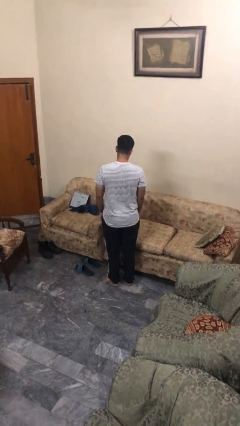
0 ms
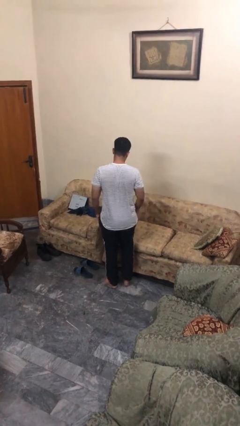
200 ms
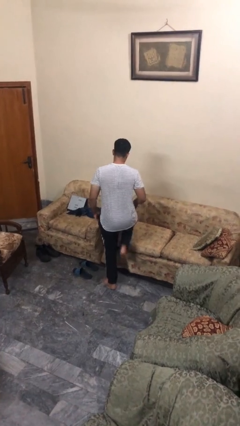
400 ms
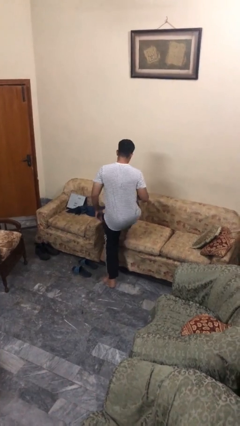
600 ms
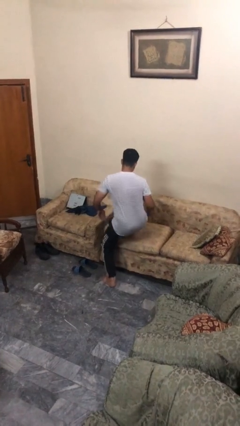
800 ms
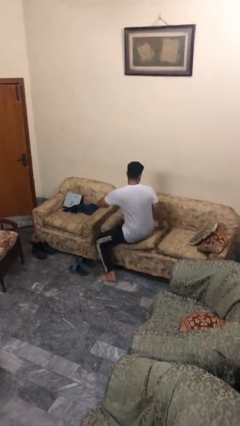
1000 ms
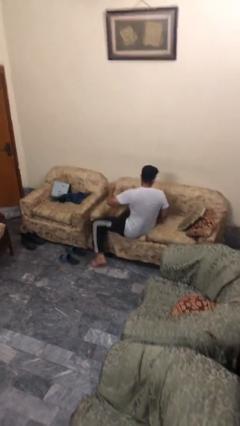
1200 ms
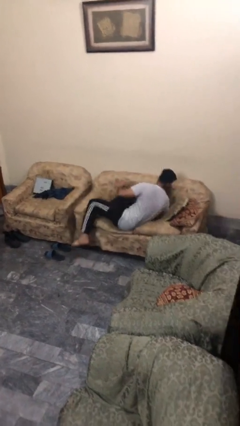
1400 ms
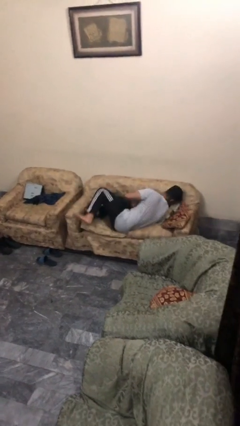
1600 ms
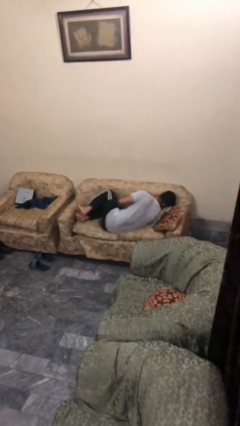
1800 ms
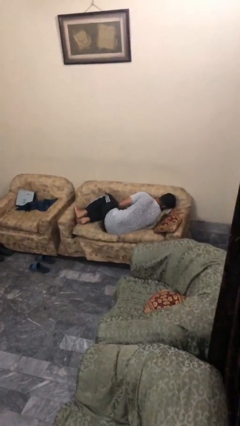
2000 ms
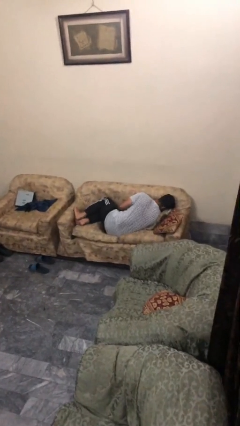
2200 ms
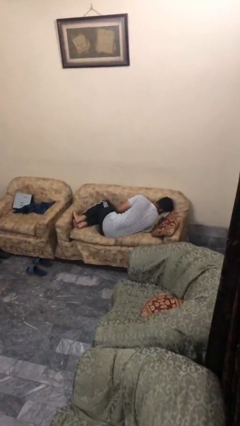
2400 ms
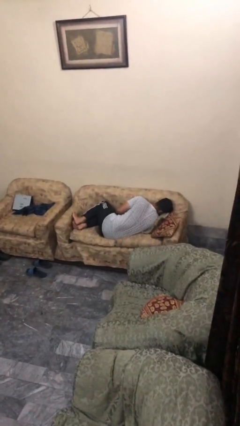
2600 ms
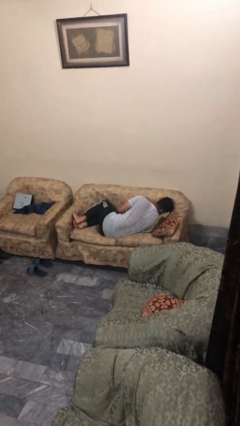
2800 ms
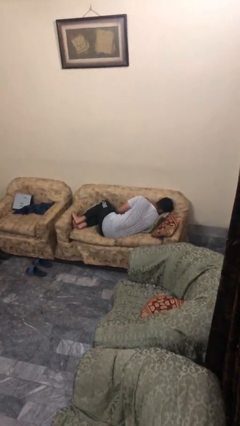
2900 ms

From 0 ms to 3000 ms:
person lies down on couch

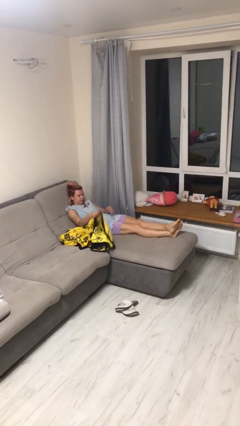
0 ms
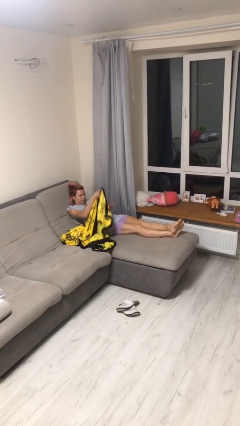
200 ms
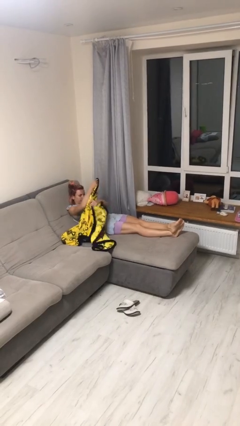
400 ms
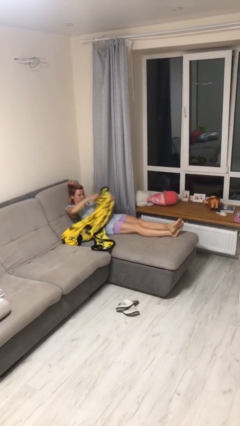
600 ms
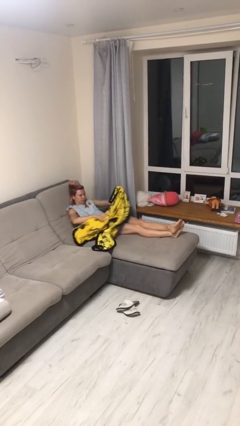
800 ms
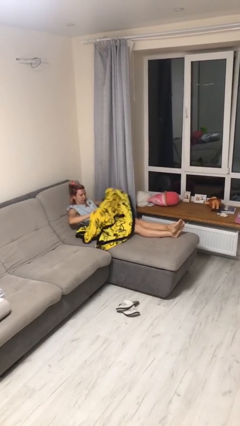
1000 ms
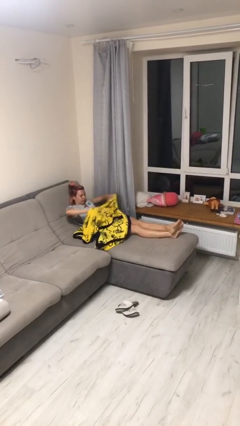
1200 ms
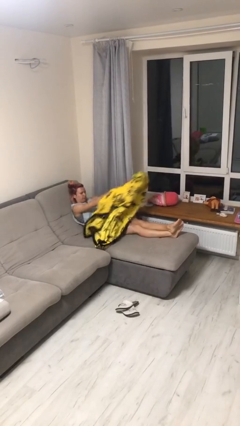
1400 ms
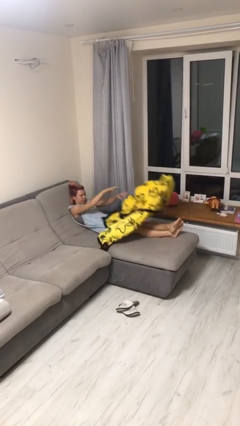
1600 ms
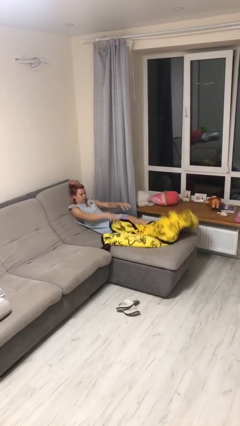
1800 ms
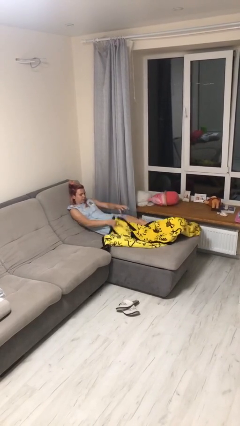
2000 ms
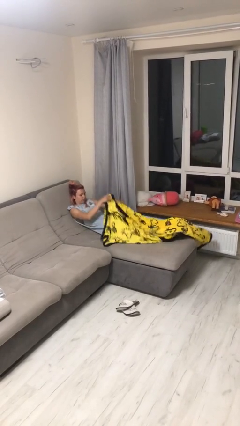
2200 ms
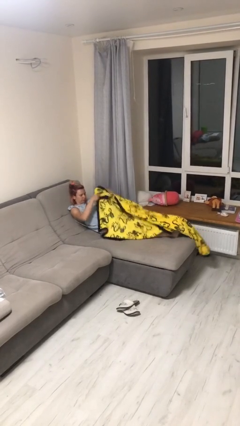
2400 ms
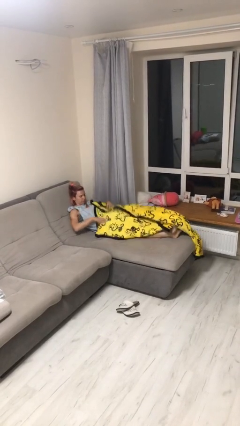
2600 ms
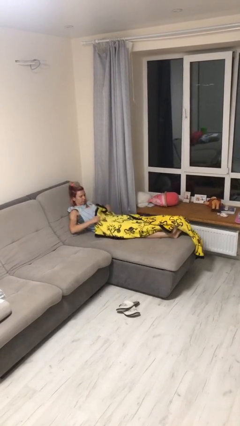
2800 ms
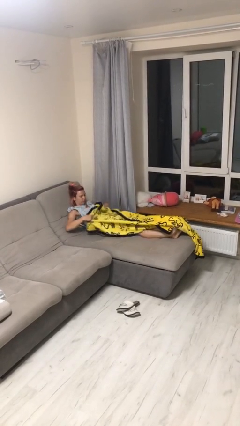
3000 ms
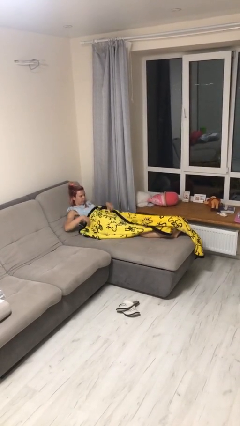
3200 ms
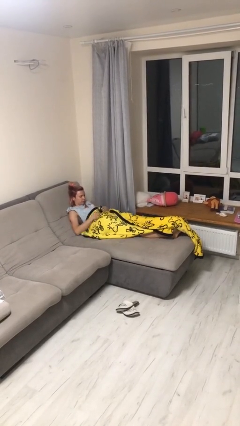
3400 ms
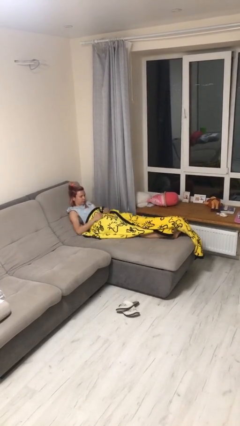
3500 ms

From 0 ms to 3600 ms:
person covers with blanket

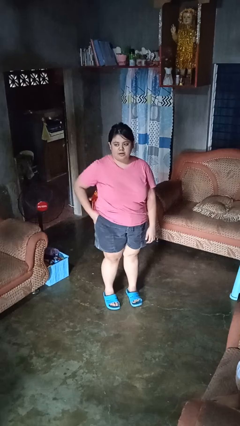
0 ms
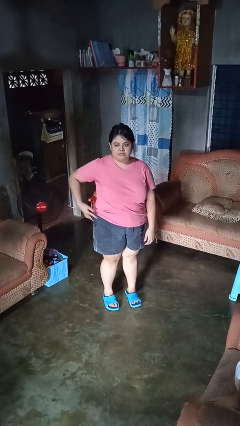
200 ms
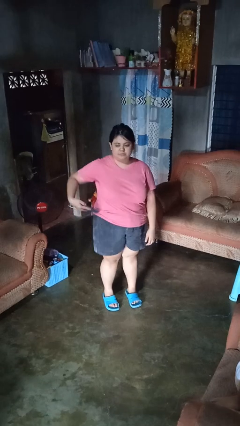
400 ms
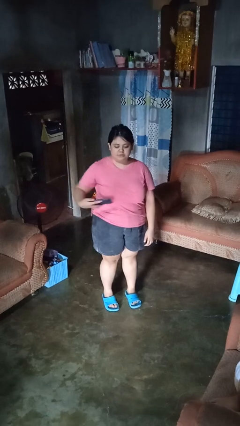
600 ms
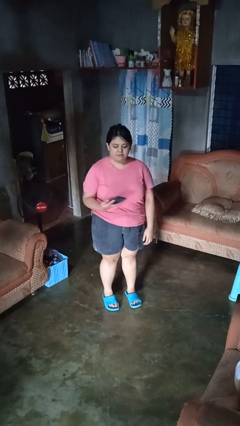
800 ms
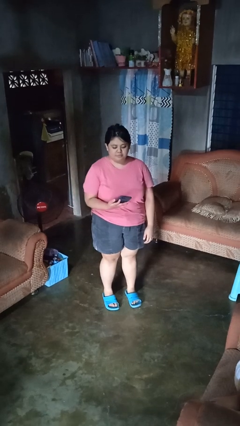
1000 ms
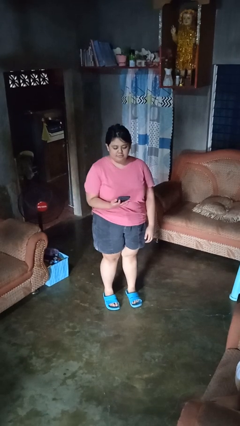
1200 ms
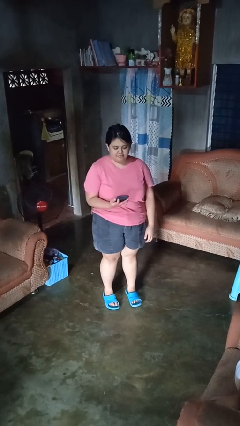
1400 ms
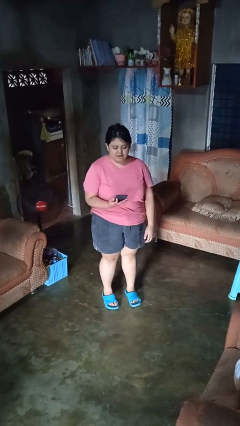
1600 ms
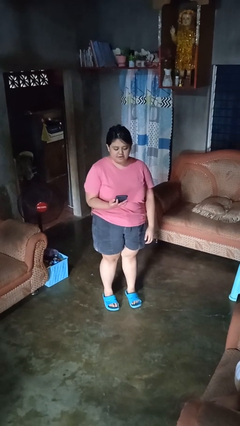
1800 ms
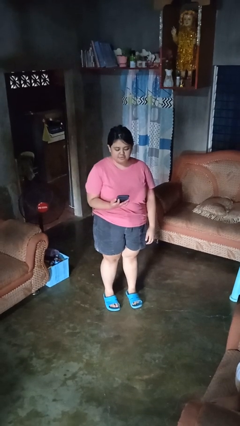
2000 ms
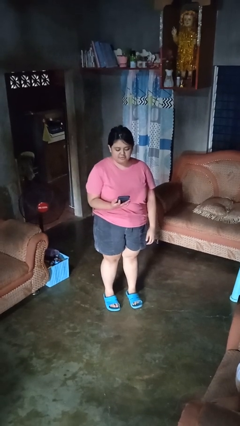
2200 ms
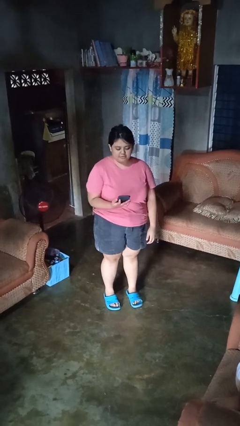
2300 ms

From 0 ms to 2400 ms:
person takes phone from pocket

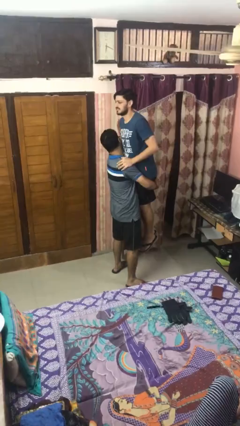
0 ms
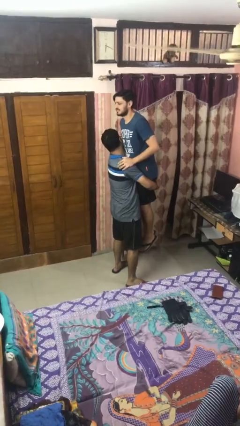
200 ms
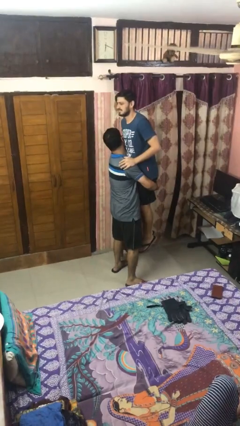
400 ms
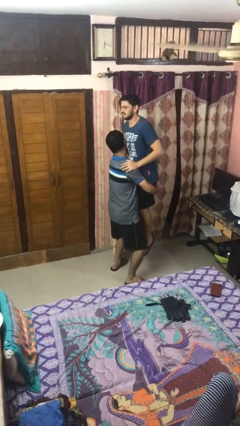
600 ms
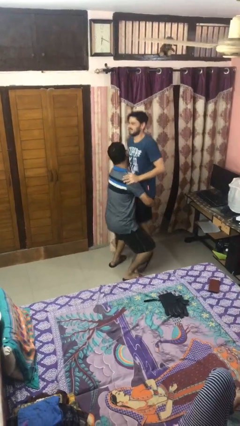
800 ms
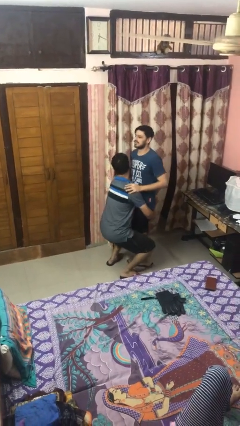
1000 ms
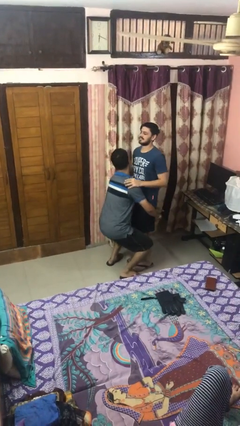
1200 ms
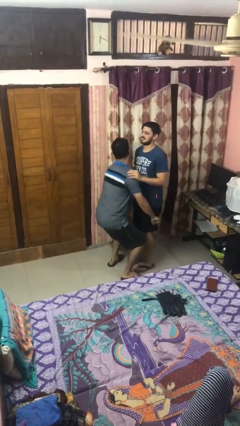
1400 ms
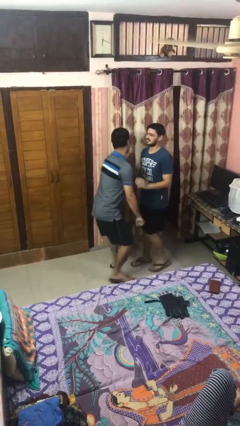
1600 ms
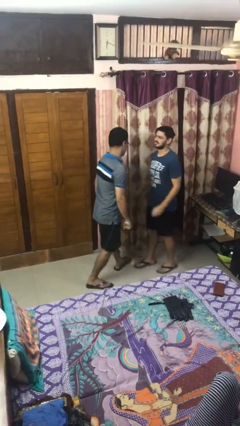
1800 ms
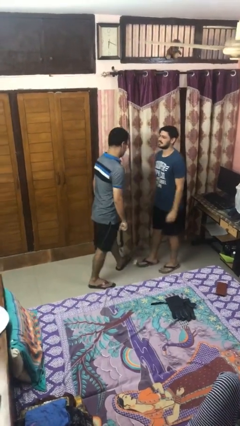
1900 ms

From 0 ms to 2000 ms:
person puts down person

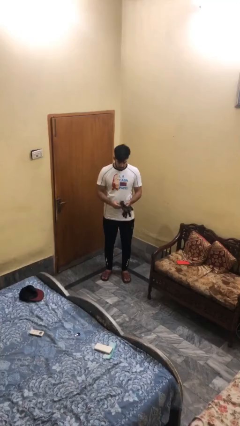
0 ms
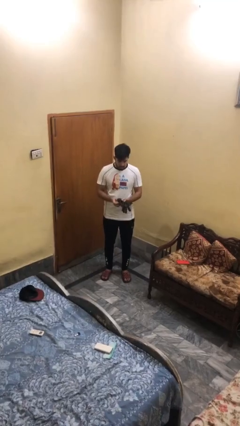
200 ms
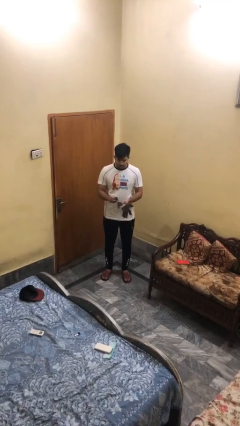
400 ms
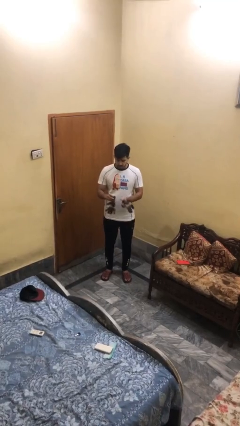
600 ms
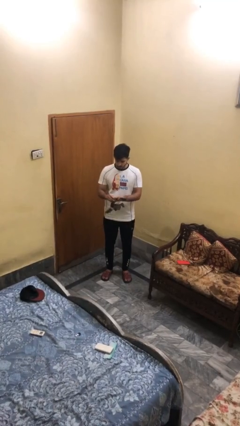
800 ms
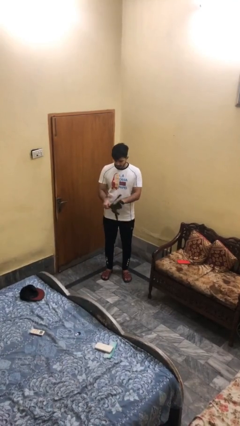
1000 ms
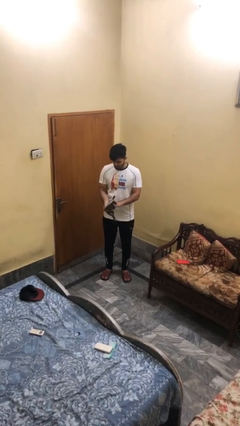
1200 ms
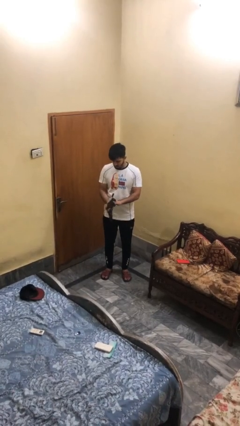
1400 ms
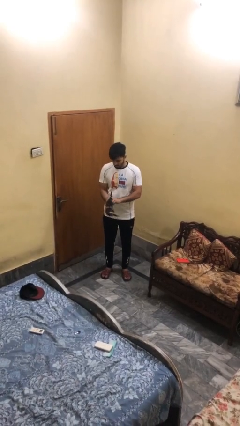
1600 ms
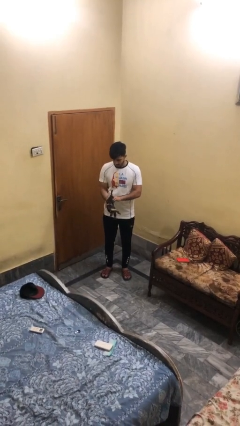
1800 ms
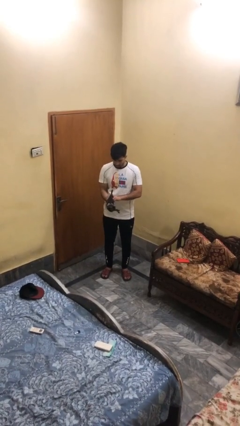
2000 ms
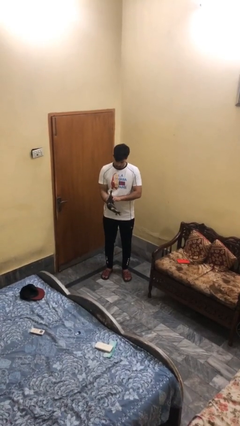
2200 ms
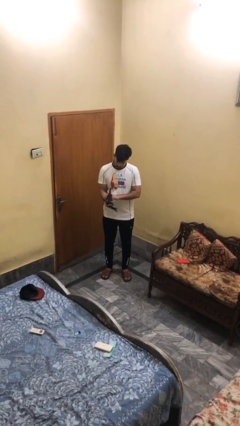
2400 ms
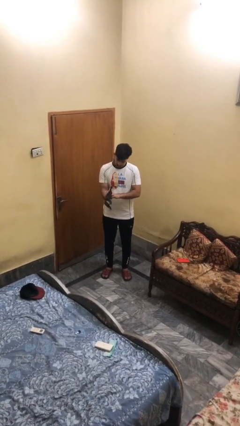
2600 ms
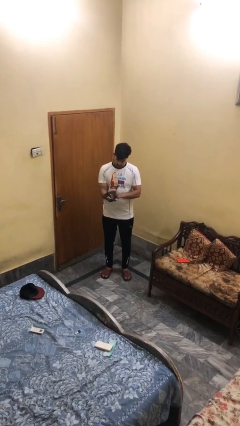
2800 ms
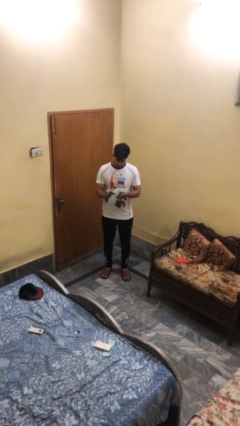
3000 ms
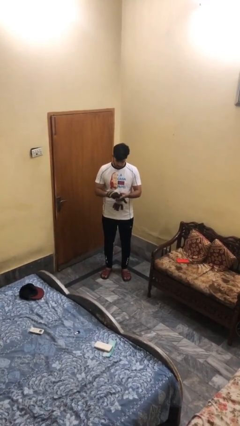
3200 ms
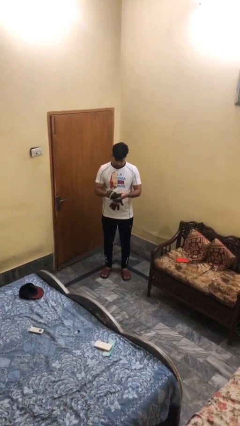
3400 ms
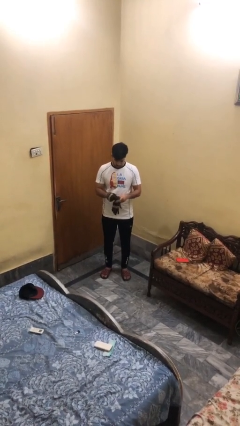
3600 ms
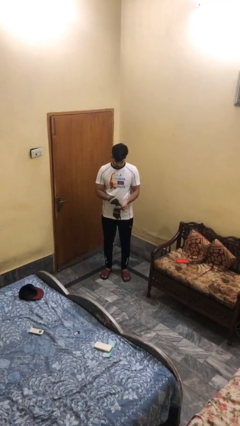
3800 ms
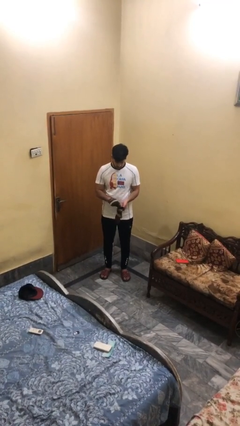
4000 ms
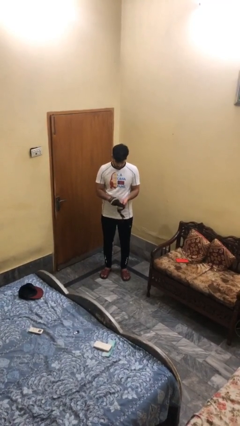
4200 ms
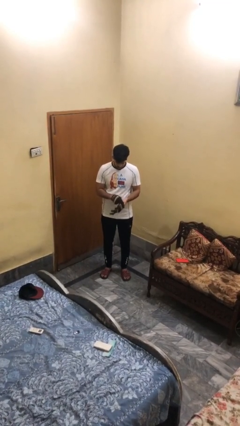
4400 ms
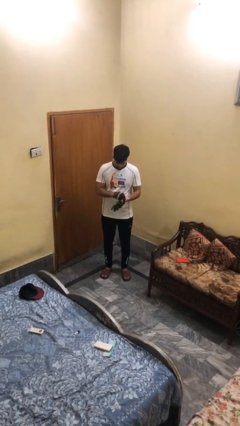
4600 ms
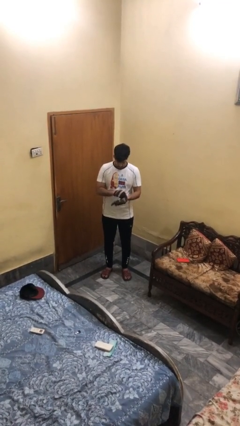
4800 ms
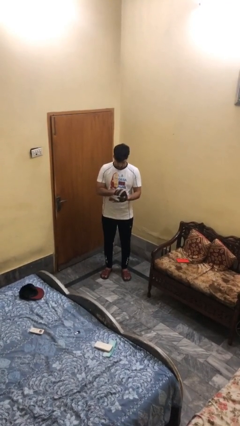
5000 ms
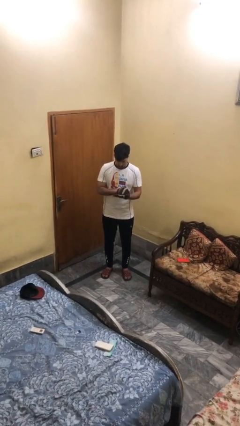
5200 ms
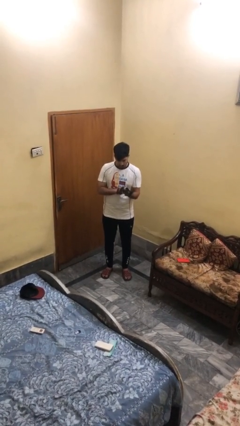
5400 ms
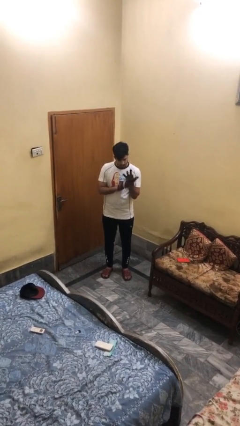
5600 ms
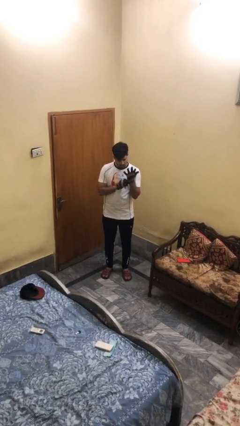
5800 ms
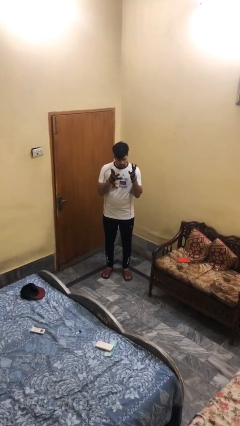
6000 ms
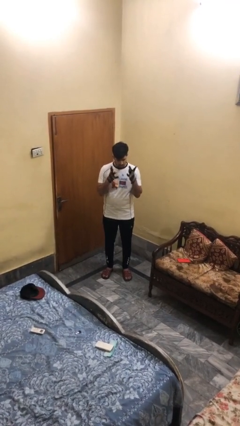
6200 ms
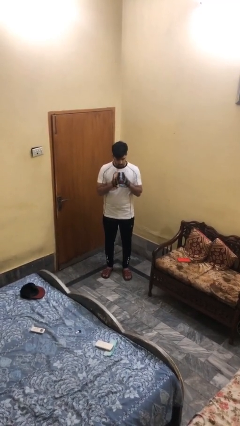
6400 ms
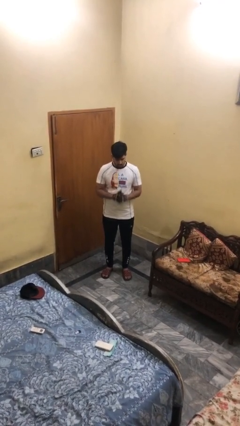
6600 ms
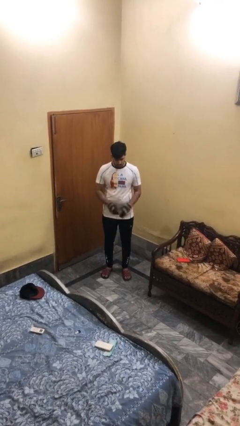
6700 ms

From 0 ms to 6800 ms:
person puts on gloves

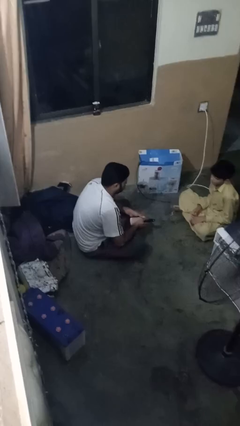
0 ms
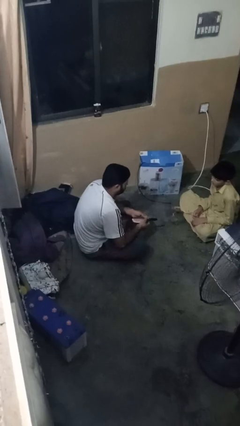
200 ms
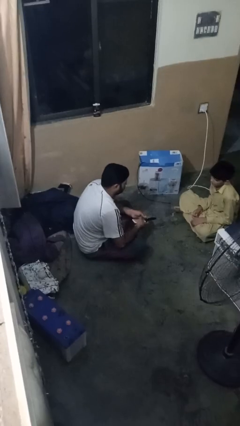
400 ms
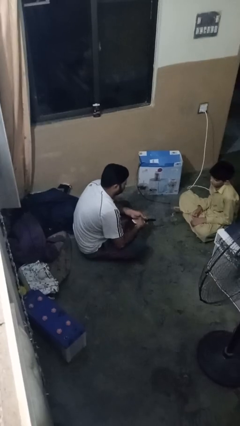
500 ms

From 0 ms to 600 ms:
person catches object from person
